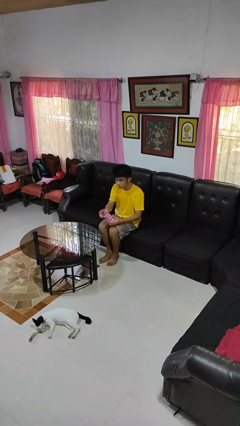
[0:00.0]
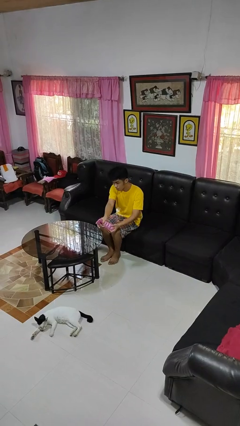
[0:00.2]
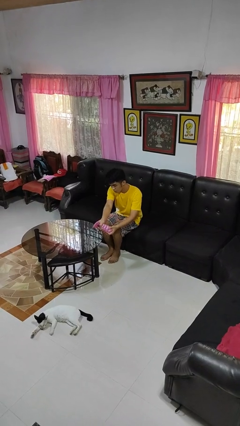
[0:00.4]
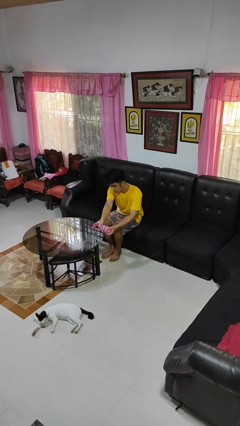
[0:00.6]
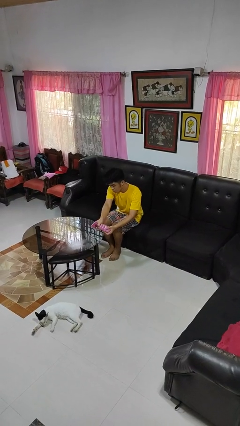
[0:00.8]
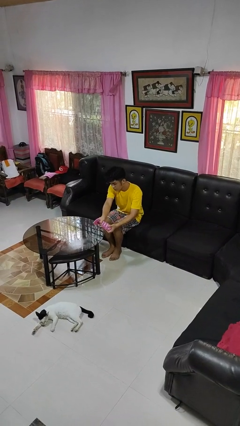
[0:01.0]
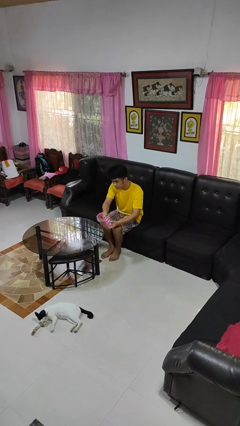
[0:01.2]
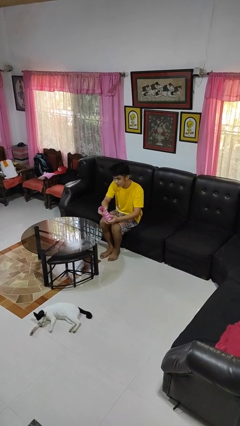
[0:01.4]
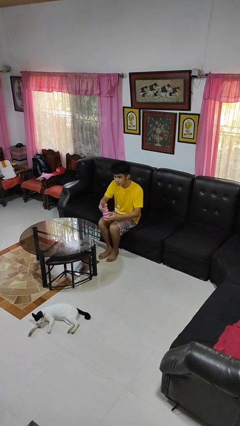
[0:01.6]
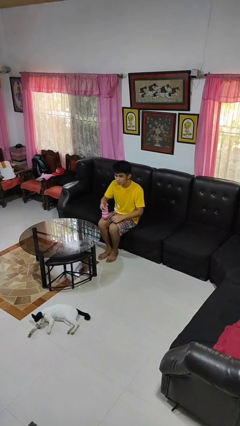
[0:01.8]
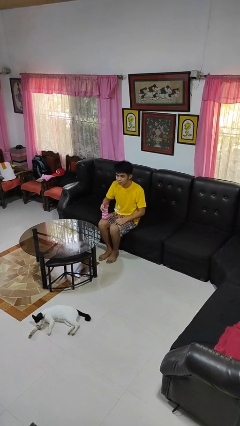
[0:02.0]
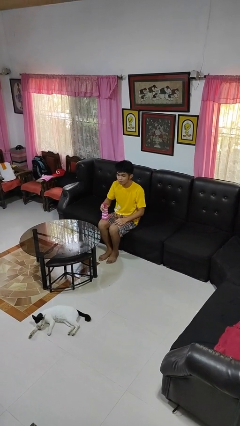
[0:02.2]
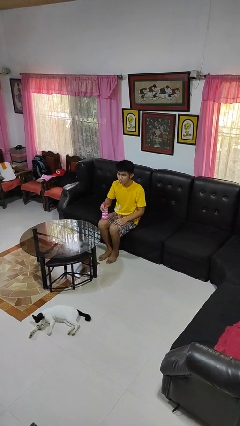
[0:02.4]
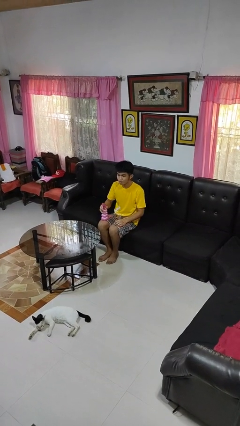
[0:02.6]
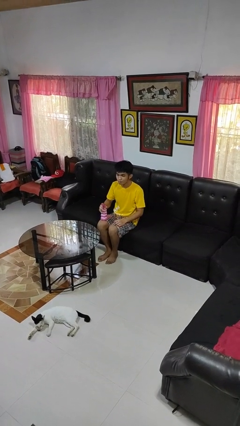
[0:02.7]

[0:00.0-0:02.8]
person sprays from bottle

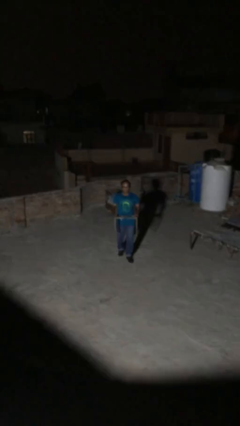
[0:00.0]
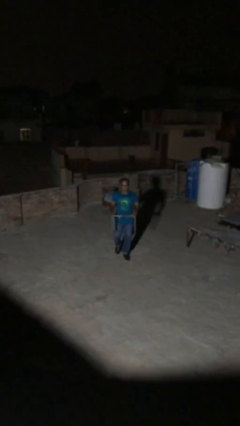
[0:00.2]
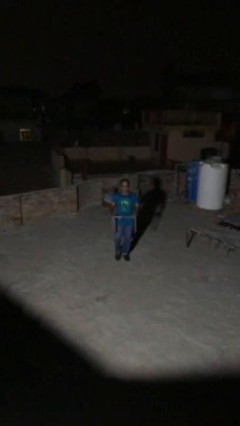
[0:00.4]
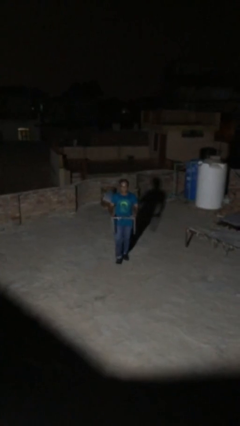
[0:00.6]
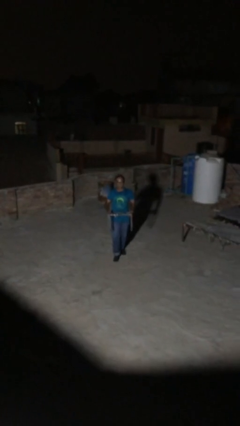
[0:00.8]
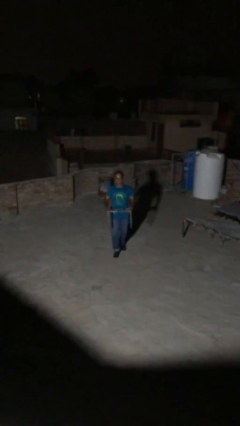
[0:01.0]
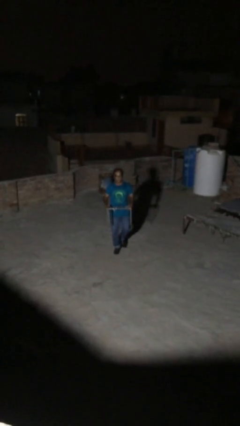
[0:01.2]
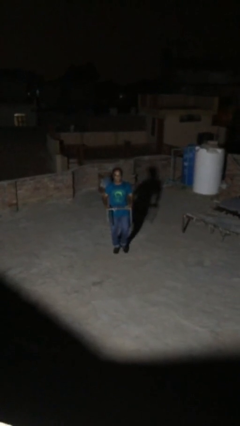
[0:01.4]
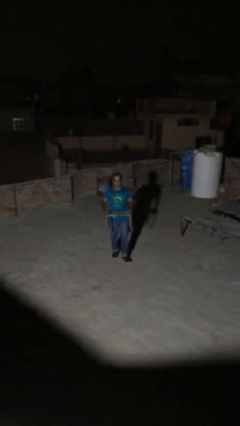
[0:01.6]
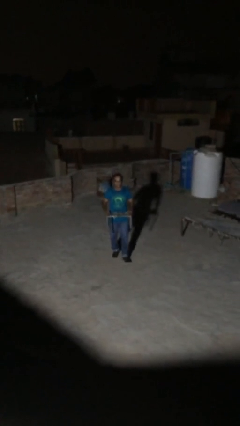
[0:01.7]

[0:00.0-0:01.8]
person carries heavy object

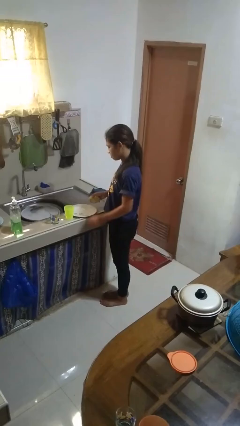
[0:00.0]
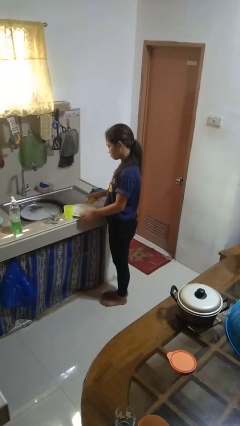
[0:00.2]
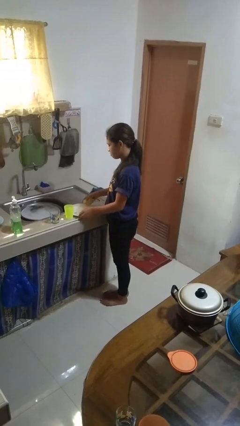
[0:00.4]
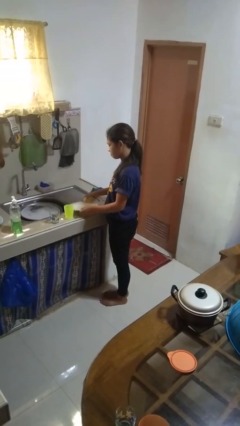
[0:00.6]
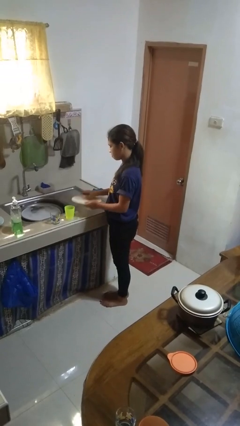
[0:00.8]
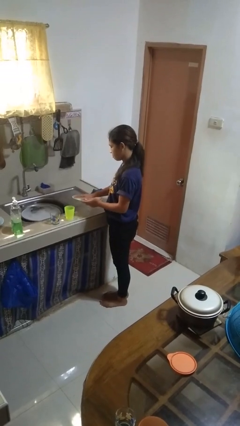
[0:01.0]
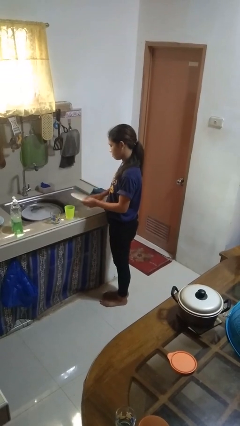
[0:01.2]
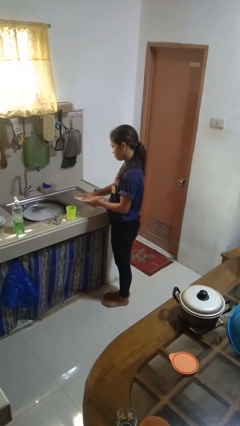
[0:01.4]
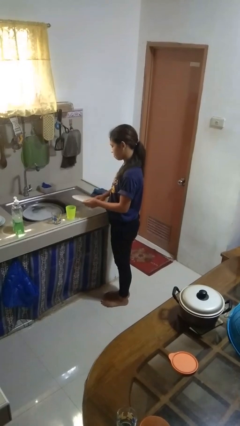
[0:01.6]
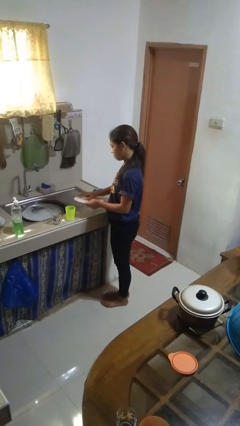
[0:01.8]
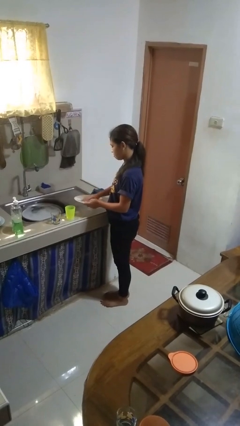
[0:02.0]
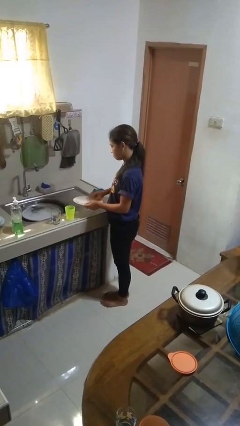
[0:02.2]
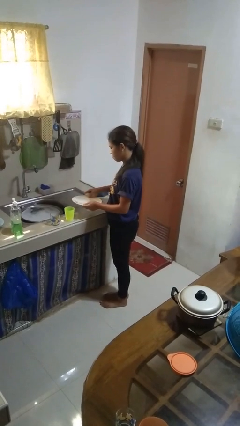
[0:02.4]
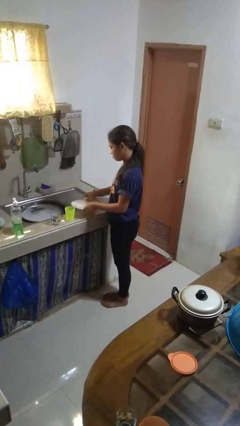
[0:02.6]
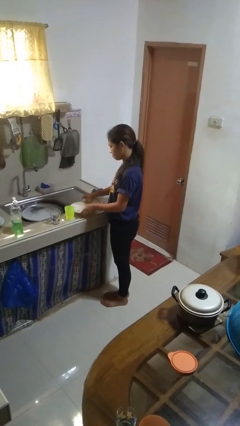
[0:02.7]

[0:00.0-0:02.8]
person washes dish

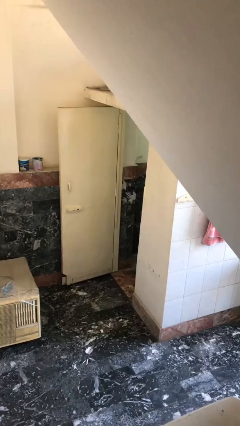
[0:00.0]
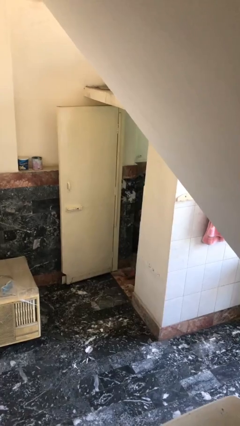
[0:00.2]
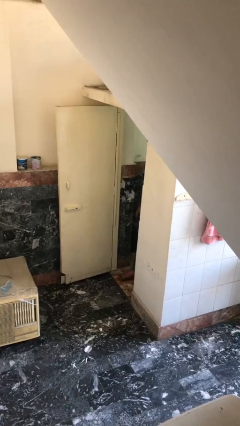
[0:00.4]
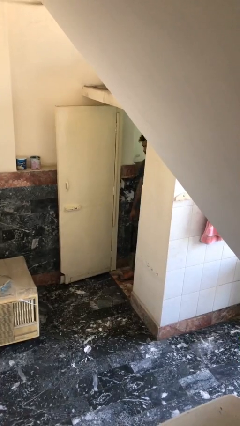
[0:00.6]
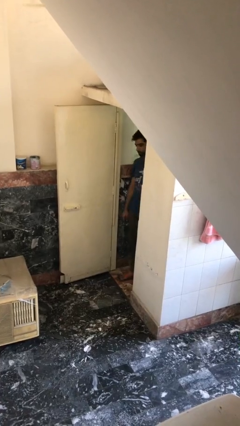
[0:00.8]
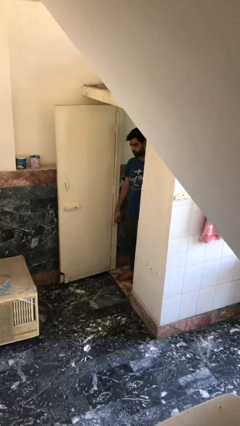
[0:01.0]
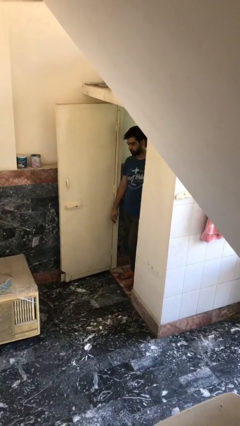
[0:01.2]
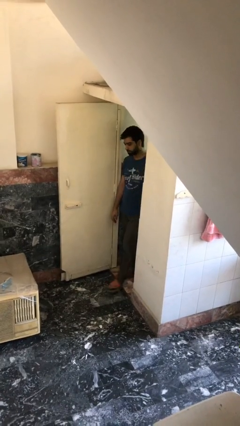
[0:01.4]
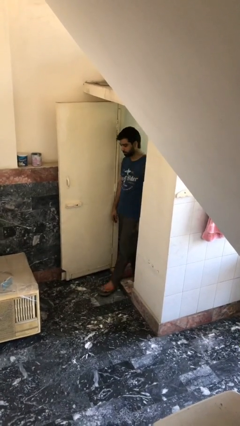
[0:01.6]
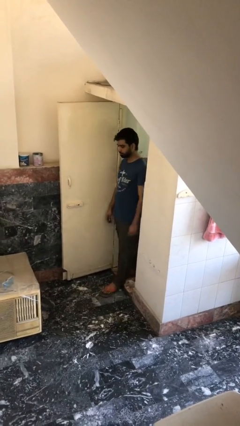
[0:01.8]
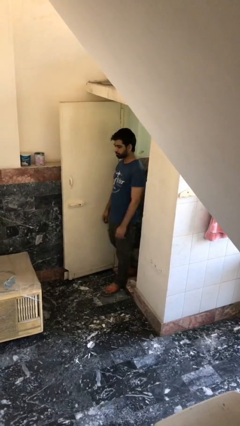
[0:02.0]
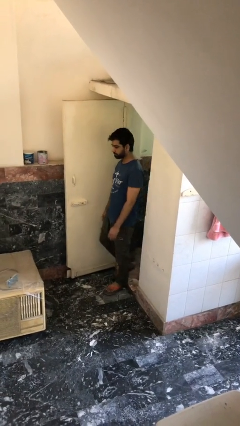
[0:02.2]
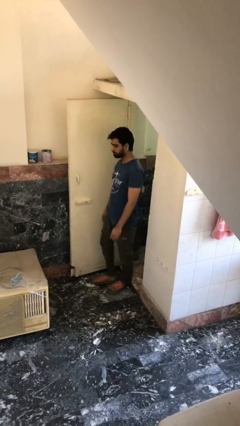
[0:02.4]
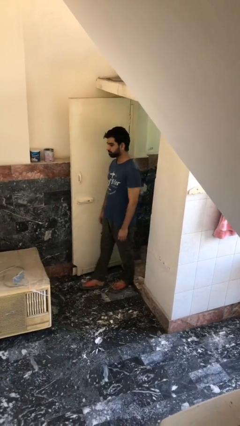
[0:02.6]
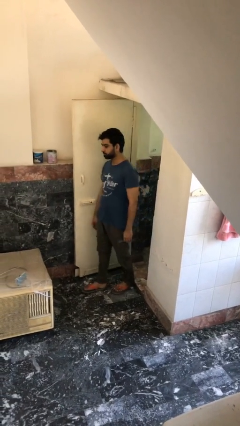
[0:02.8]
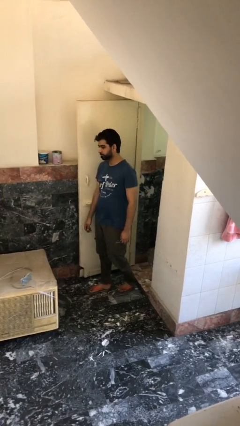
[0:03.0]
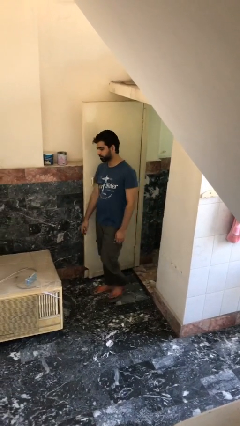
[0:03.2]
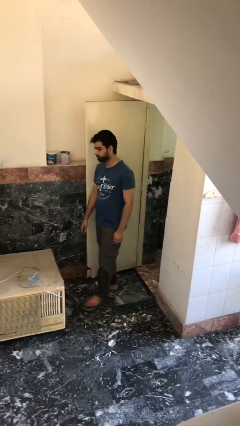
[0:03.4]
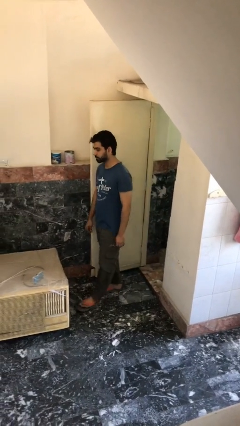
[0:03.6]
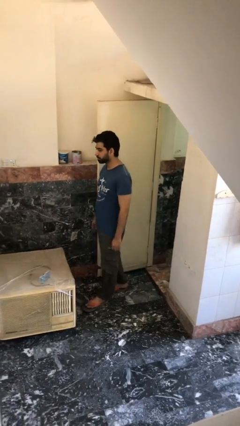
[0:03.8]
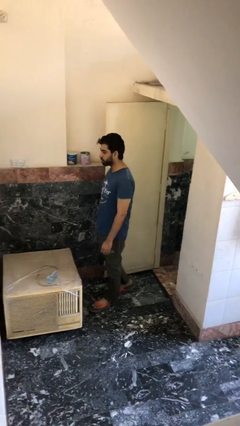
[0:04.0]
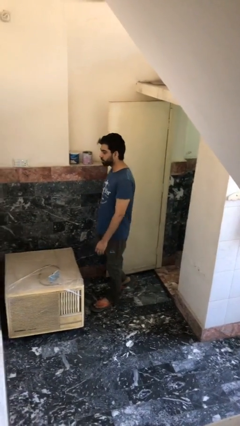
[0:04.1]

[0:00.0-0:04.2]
person enters scene through structure

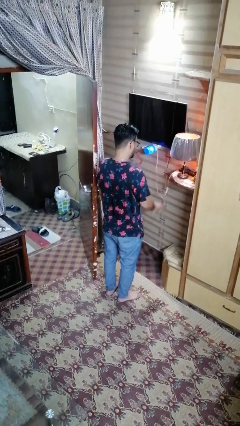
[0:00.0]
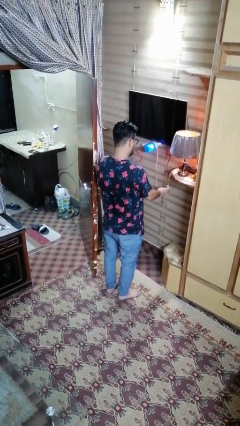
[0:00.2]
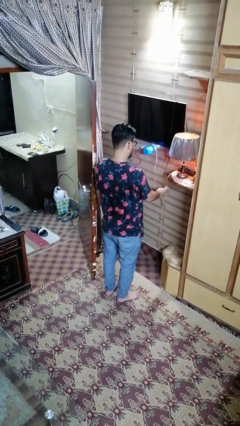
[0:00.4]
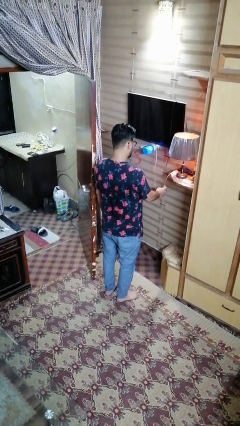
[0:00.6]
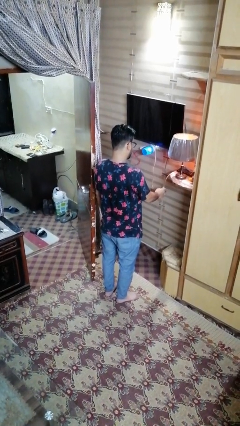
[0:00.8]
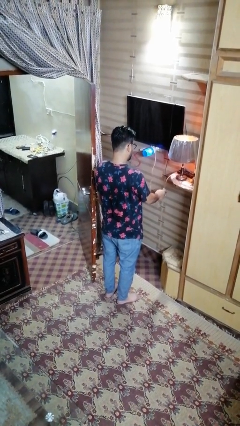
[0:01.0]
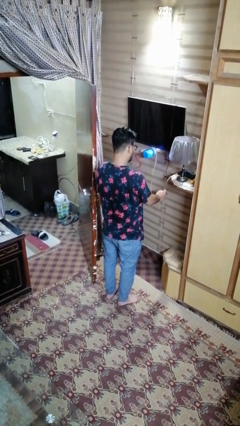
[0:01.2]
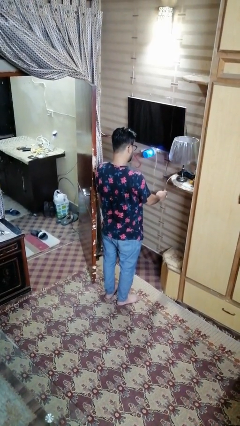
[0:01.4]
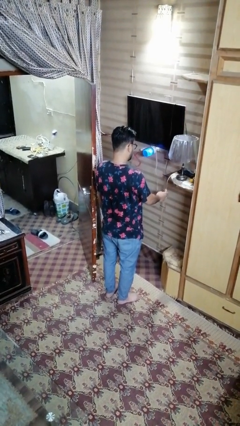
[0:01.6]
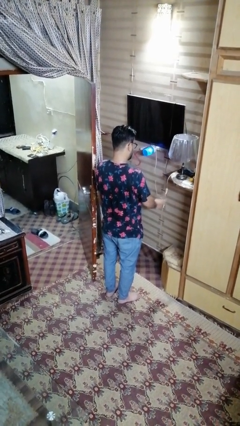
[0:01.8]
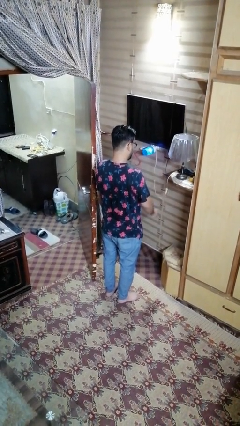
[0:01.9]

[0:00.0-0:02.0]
person turns off lamp

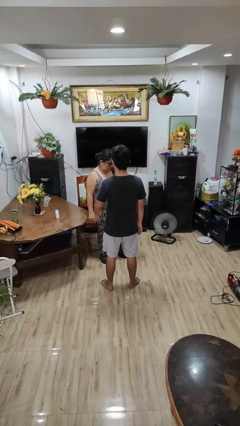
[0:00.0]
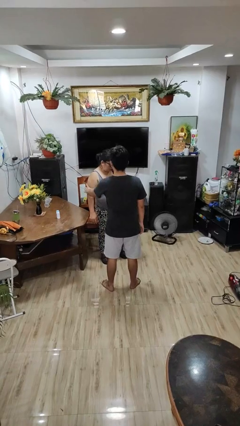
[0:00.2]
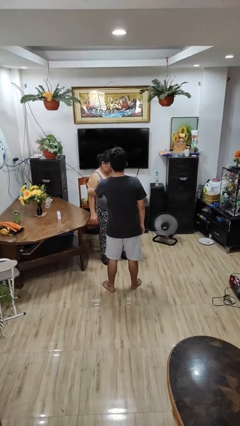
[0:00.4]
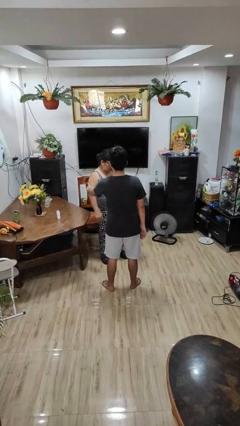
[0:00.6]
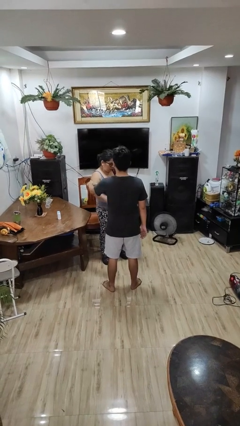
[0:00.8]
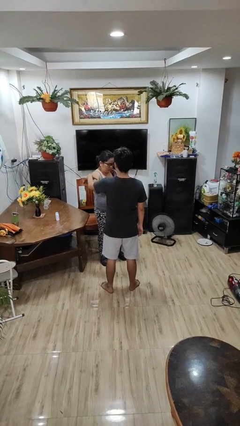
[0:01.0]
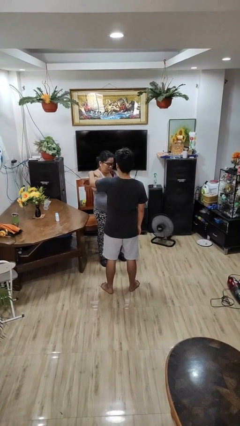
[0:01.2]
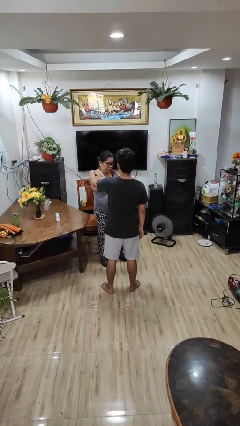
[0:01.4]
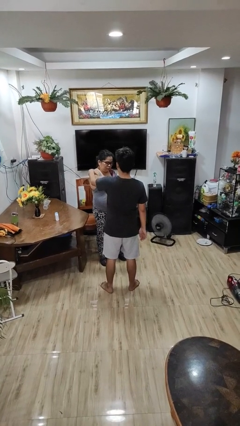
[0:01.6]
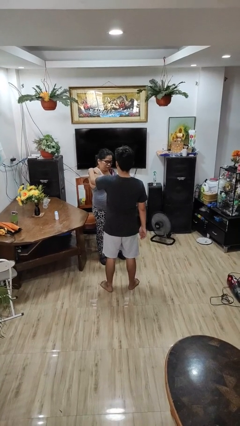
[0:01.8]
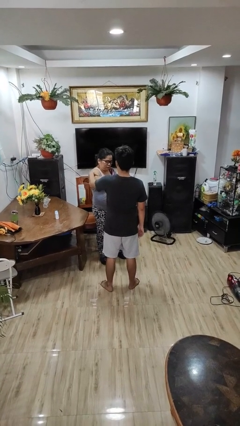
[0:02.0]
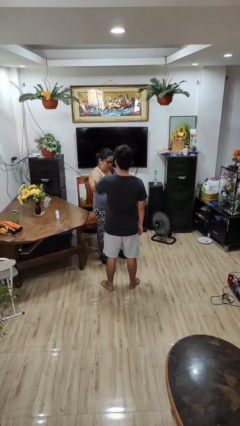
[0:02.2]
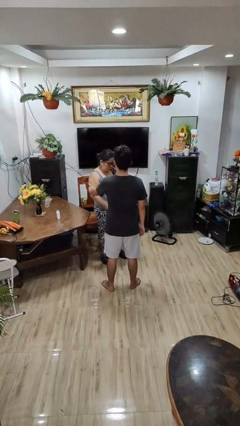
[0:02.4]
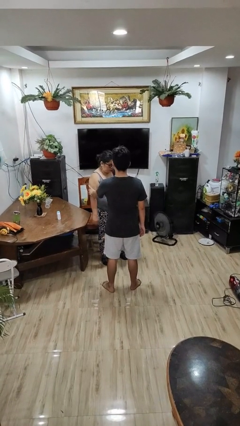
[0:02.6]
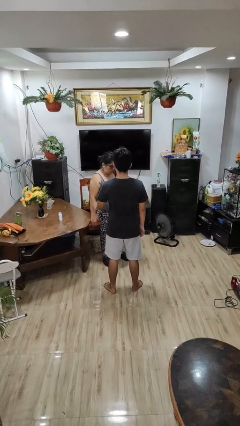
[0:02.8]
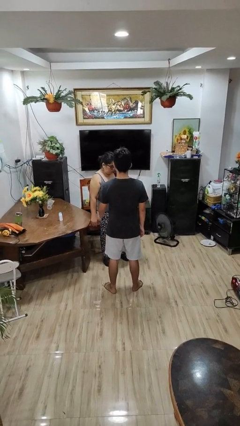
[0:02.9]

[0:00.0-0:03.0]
person grabs person by bicep

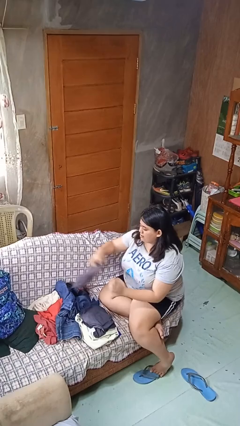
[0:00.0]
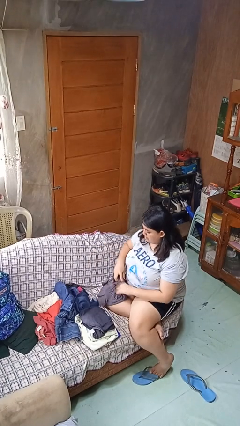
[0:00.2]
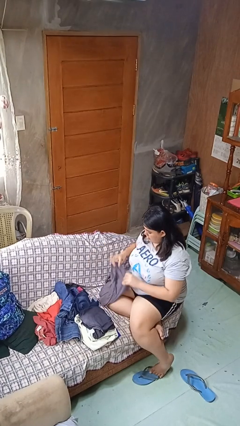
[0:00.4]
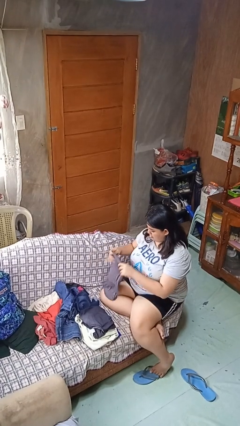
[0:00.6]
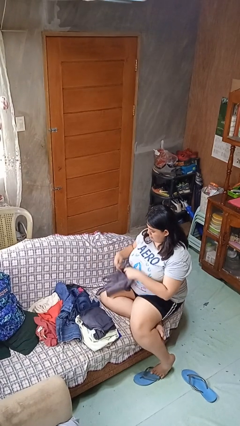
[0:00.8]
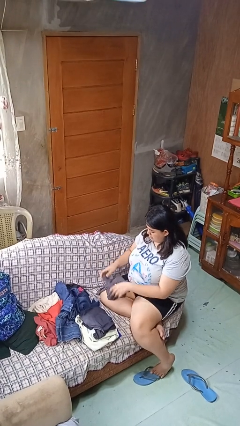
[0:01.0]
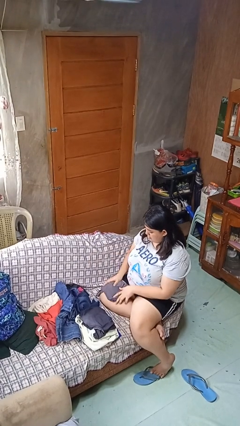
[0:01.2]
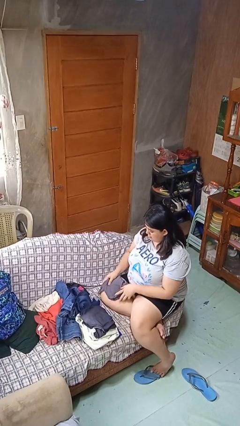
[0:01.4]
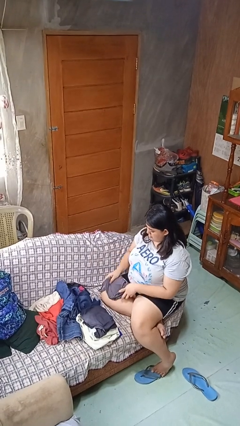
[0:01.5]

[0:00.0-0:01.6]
person folds shirt
